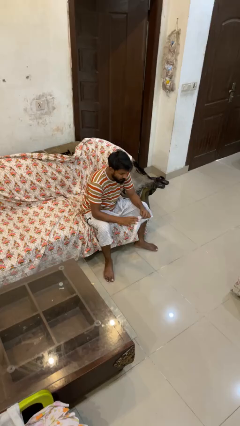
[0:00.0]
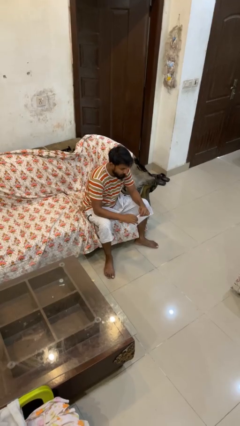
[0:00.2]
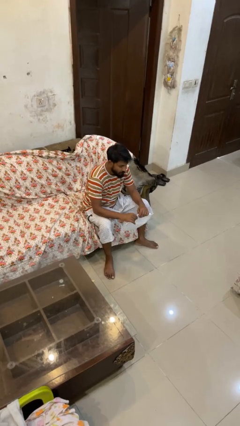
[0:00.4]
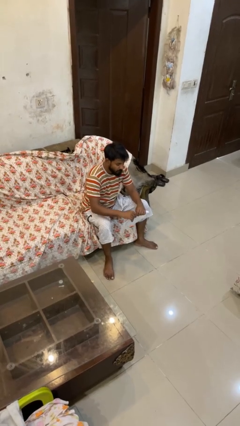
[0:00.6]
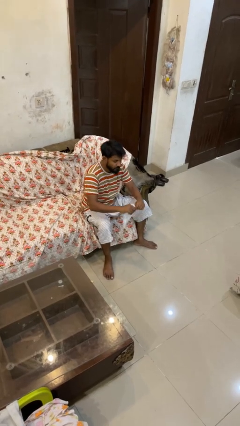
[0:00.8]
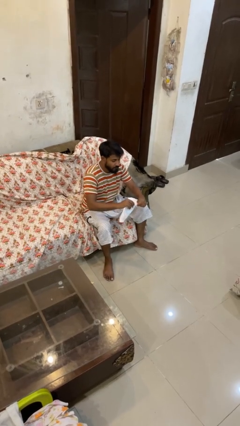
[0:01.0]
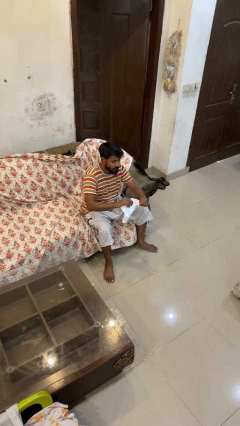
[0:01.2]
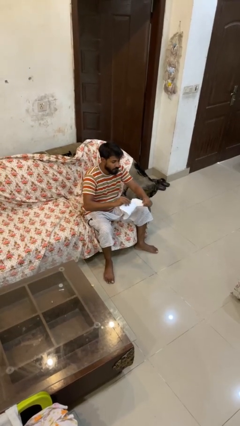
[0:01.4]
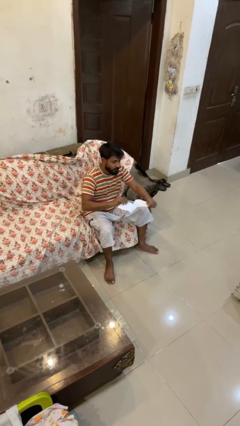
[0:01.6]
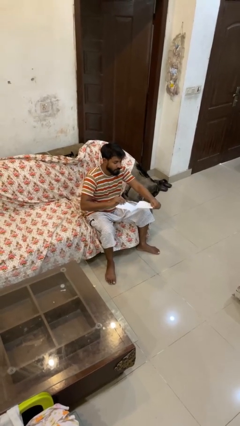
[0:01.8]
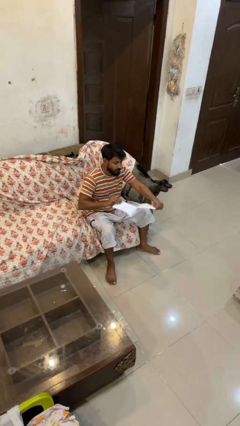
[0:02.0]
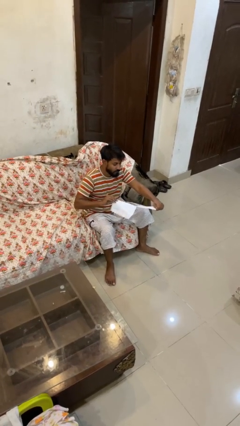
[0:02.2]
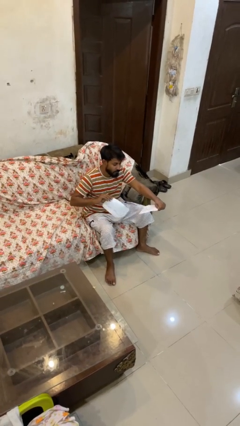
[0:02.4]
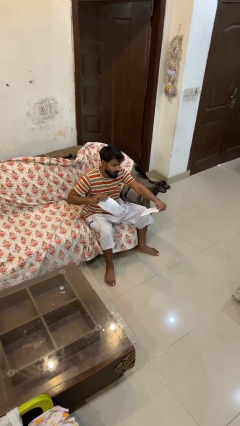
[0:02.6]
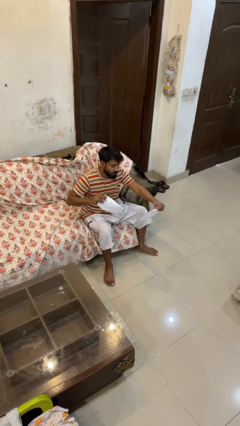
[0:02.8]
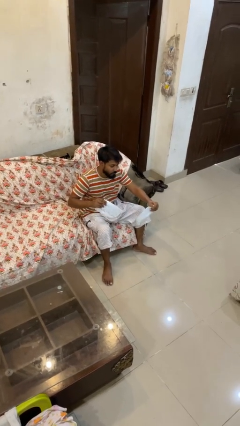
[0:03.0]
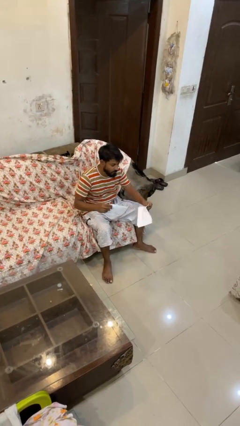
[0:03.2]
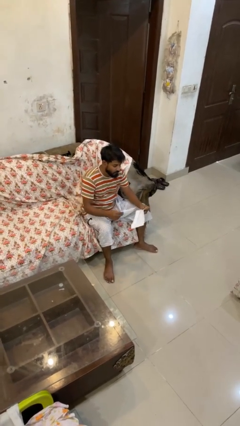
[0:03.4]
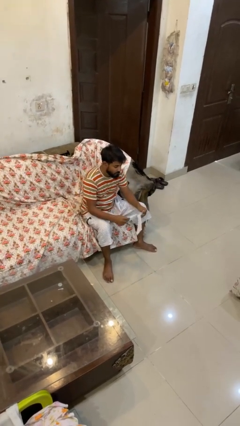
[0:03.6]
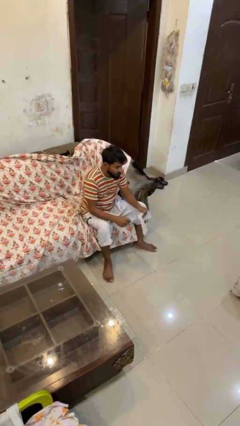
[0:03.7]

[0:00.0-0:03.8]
person tears paper

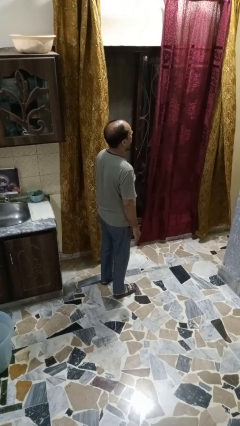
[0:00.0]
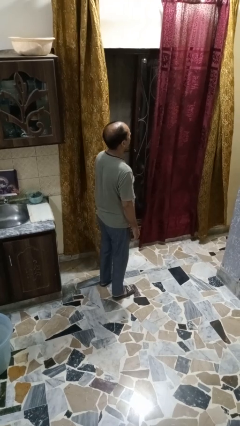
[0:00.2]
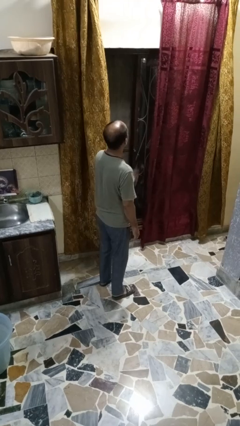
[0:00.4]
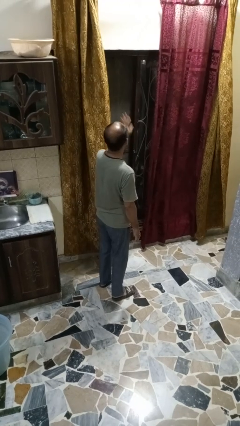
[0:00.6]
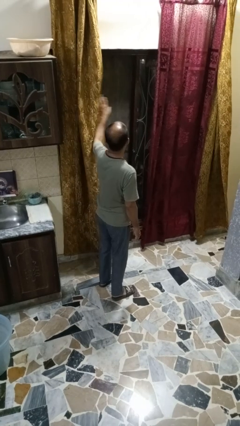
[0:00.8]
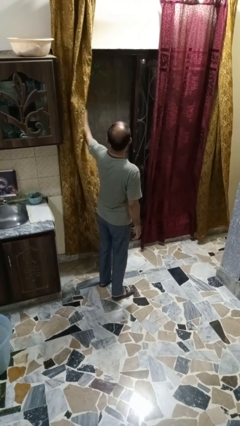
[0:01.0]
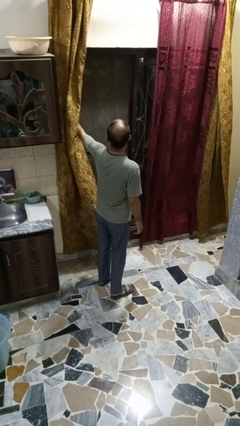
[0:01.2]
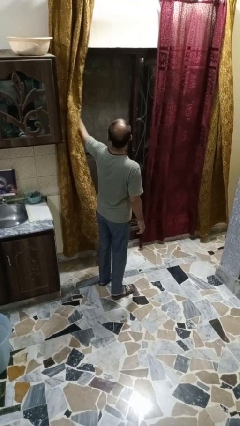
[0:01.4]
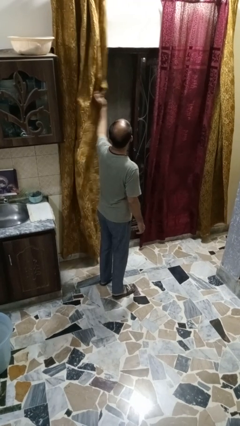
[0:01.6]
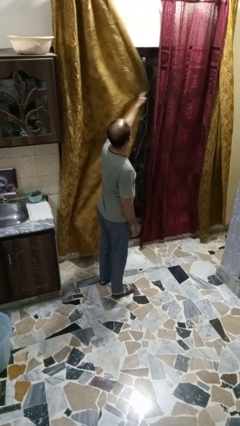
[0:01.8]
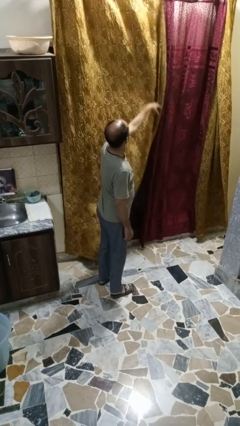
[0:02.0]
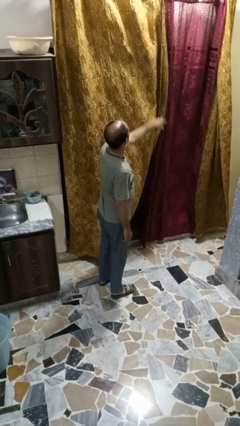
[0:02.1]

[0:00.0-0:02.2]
person closes curtains

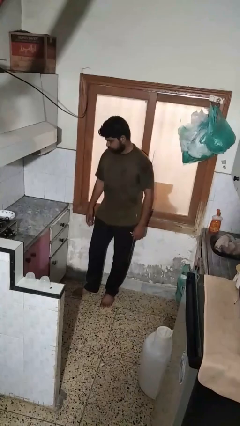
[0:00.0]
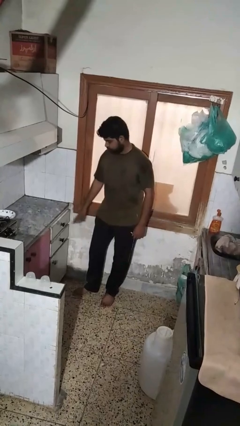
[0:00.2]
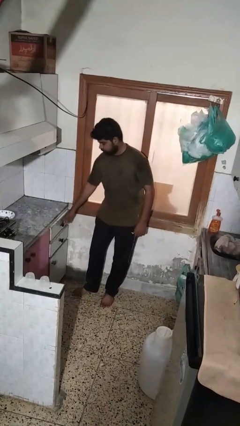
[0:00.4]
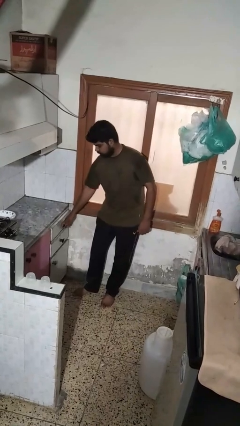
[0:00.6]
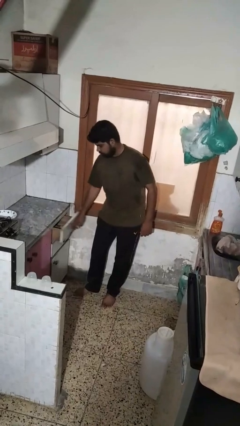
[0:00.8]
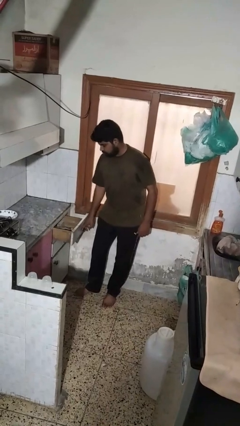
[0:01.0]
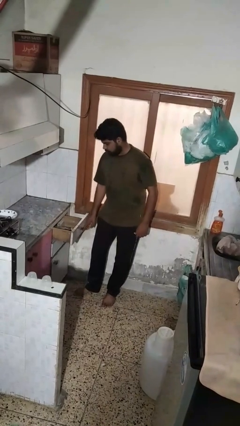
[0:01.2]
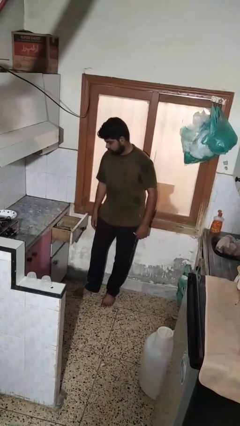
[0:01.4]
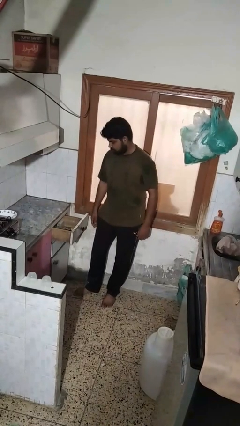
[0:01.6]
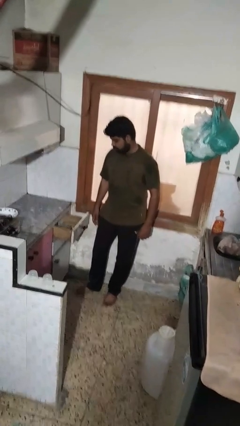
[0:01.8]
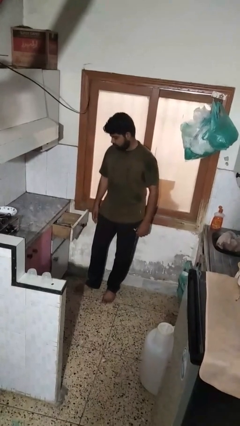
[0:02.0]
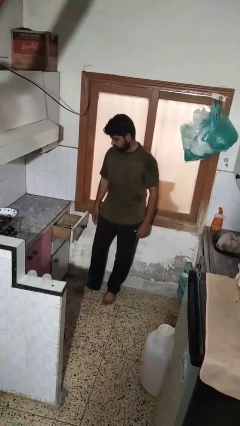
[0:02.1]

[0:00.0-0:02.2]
person opens kitchen drawer

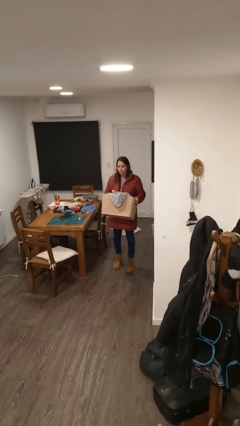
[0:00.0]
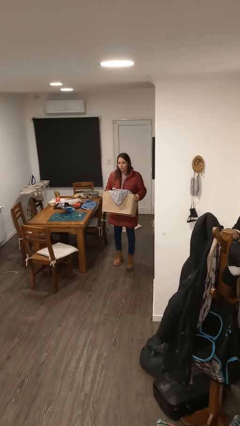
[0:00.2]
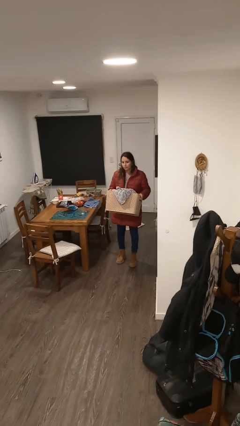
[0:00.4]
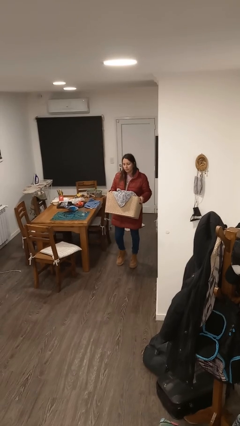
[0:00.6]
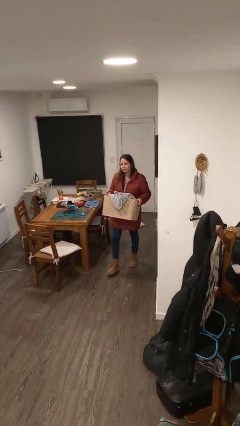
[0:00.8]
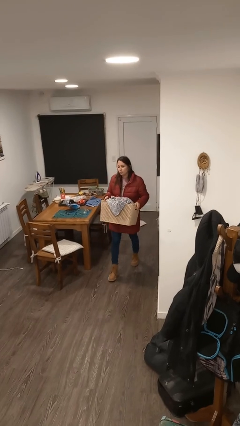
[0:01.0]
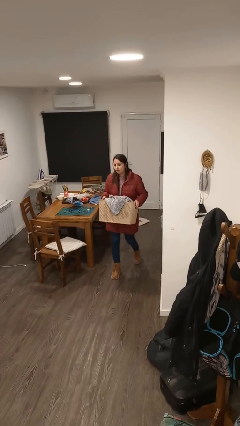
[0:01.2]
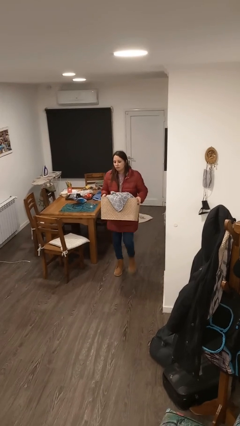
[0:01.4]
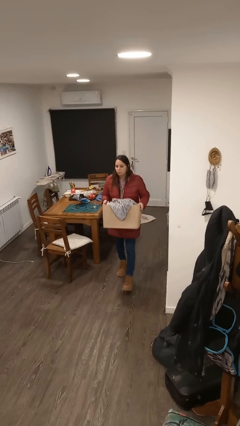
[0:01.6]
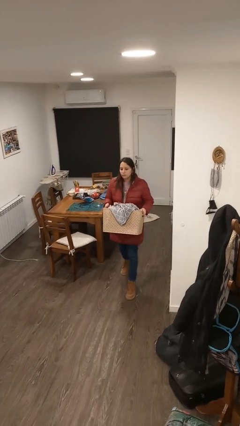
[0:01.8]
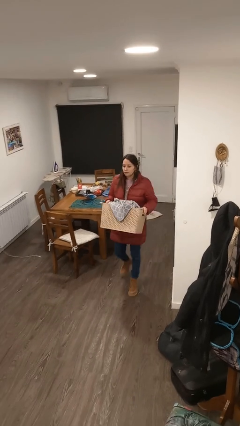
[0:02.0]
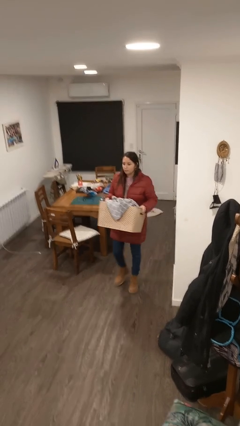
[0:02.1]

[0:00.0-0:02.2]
person carries laundry basket

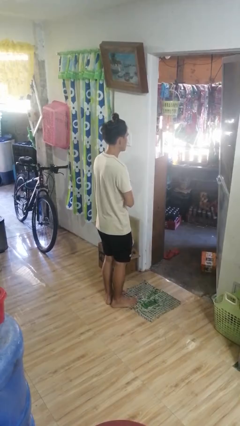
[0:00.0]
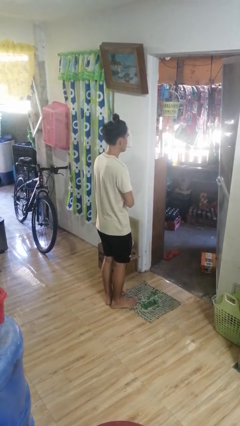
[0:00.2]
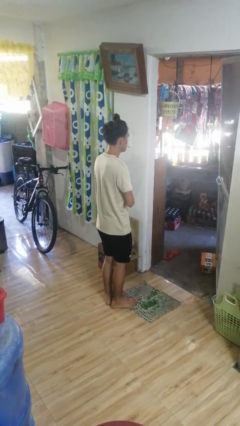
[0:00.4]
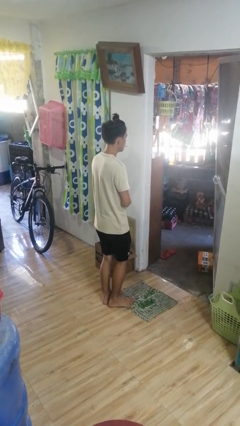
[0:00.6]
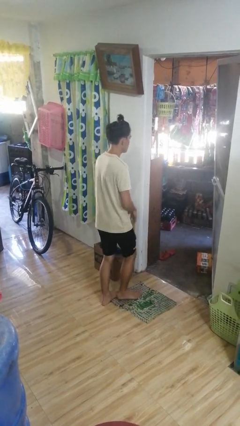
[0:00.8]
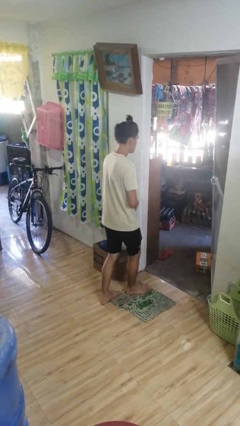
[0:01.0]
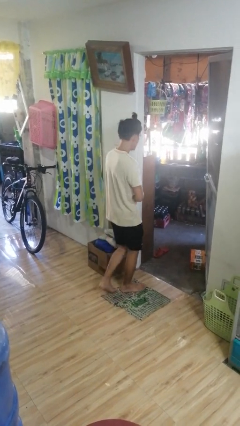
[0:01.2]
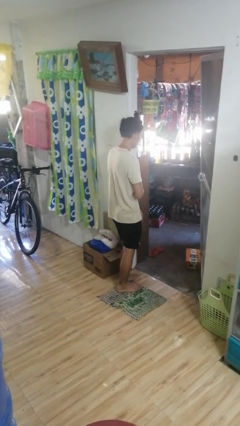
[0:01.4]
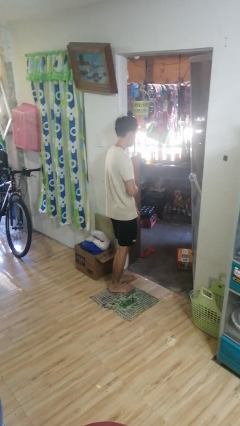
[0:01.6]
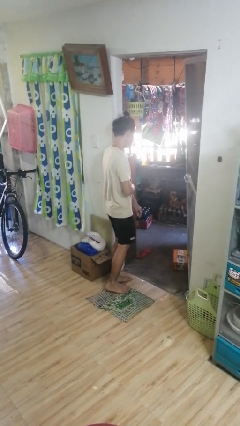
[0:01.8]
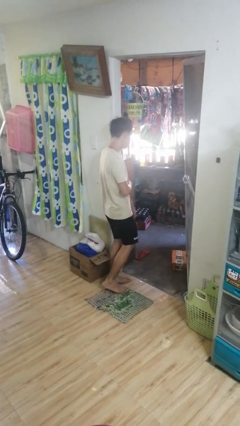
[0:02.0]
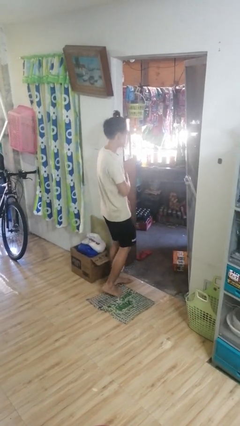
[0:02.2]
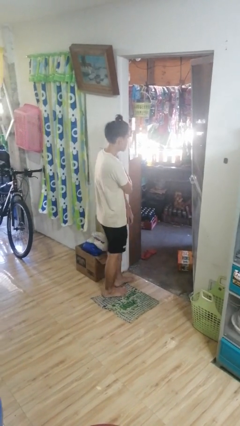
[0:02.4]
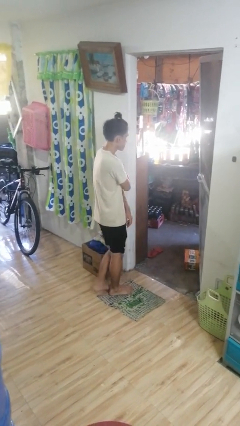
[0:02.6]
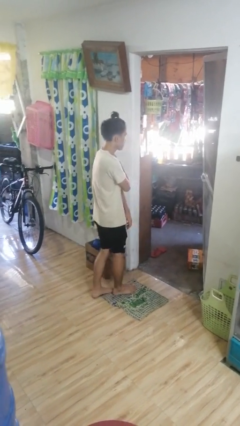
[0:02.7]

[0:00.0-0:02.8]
person bumps into wall

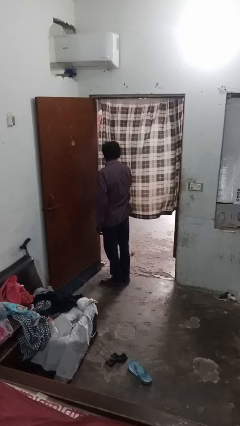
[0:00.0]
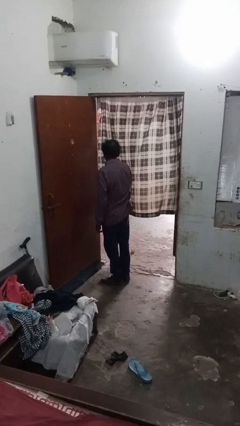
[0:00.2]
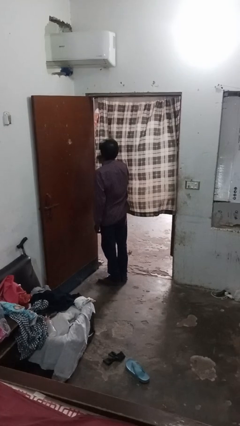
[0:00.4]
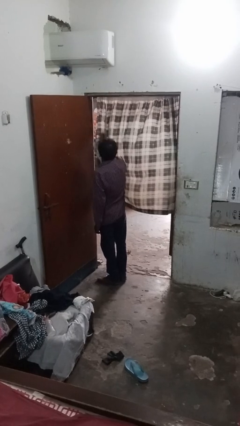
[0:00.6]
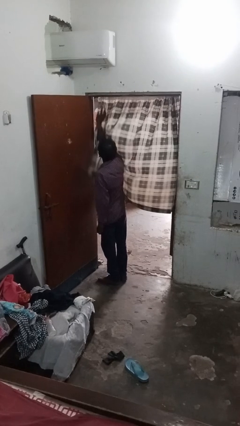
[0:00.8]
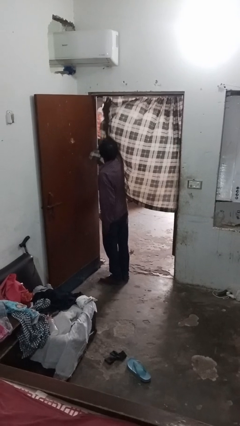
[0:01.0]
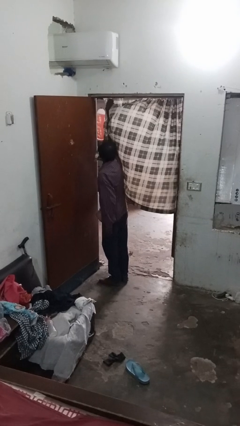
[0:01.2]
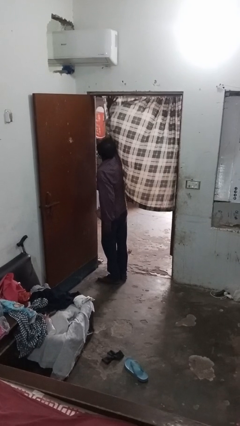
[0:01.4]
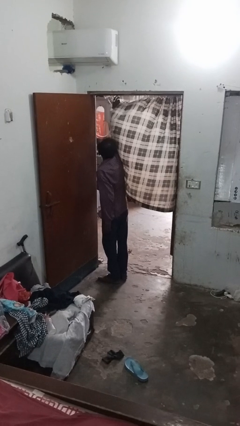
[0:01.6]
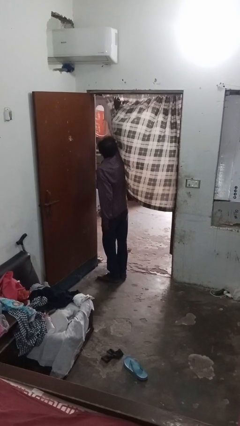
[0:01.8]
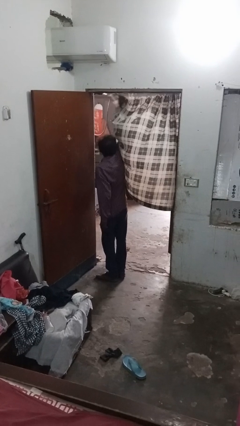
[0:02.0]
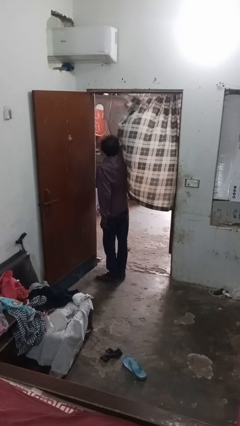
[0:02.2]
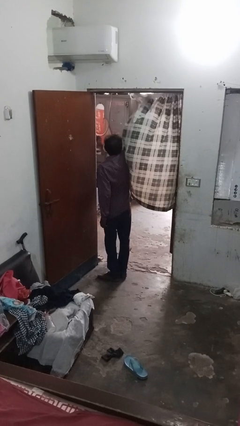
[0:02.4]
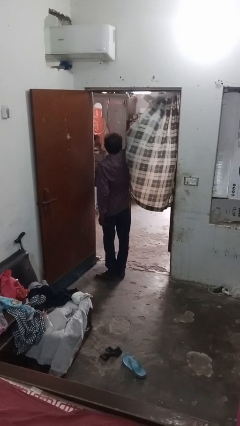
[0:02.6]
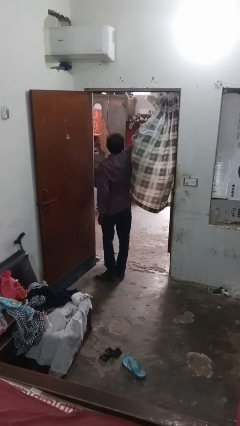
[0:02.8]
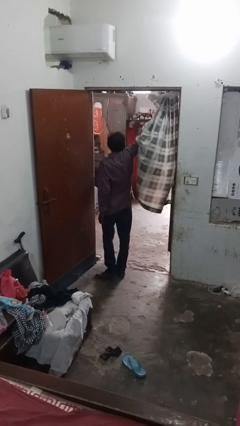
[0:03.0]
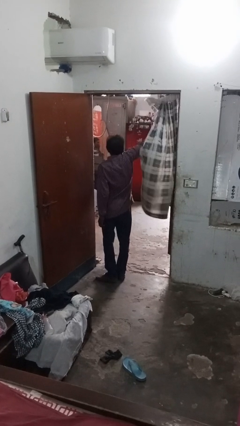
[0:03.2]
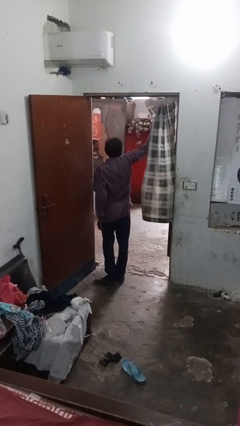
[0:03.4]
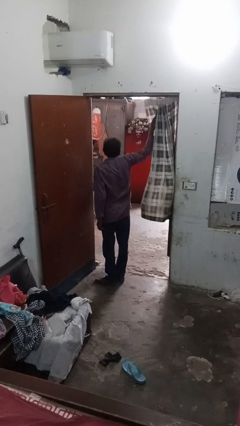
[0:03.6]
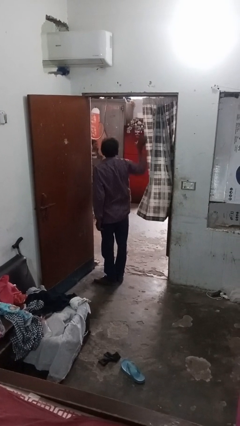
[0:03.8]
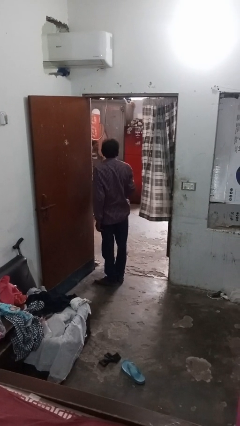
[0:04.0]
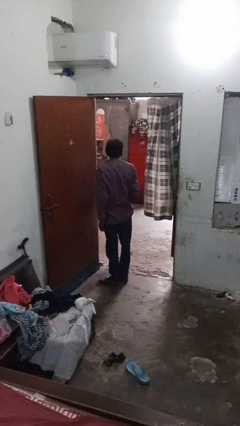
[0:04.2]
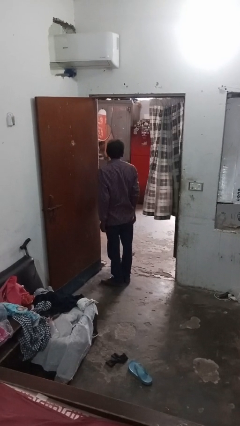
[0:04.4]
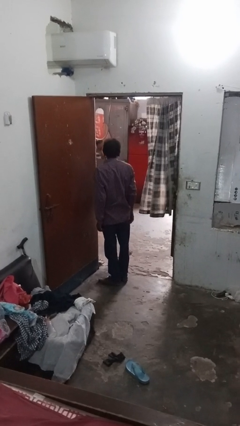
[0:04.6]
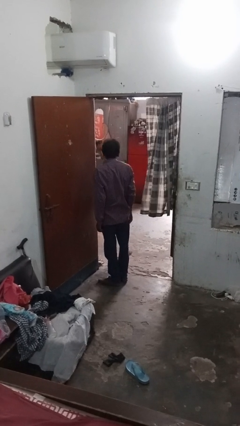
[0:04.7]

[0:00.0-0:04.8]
person opens curtains
